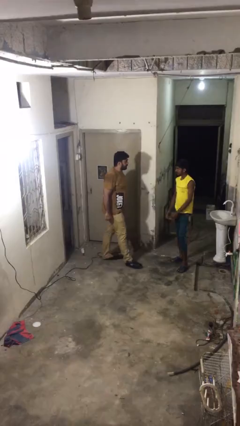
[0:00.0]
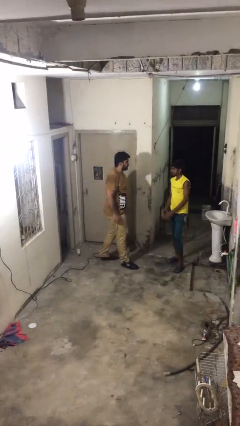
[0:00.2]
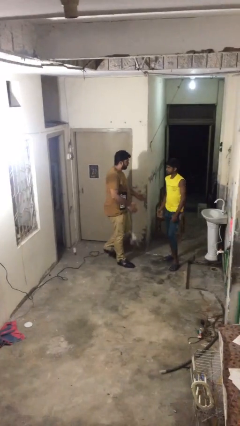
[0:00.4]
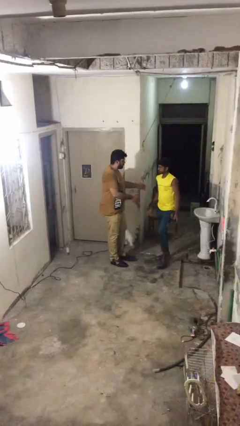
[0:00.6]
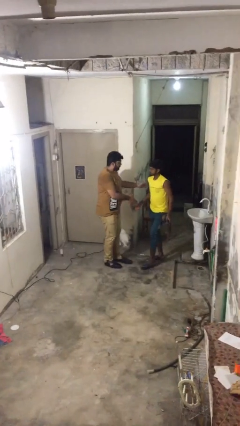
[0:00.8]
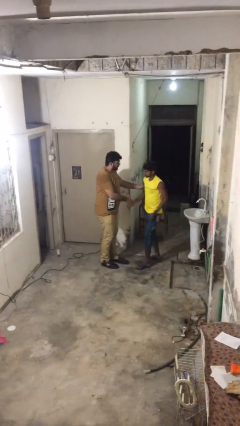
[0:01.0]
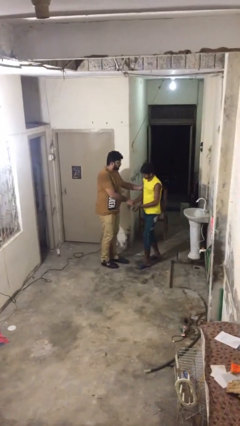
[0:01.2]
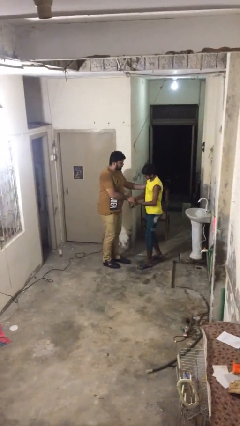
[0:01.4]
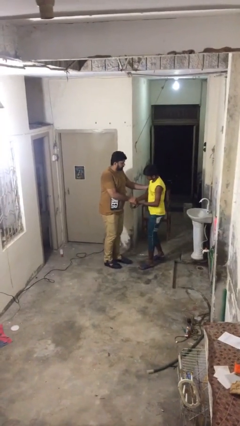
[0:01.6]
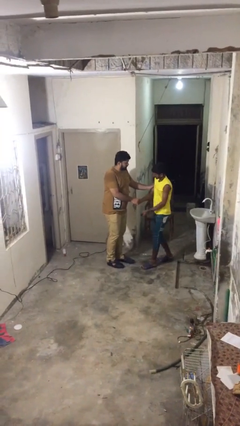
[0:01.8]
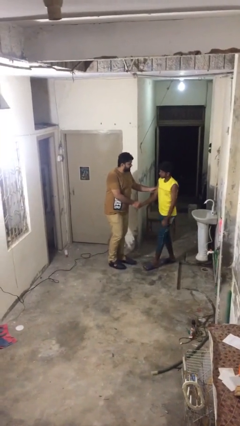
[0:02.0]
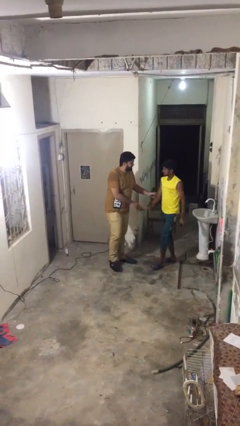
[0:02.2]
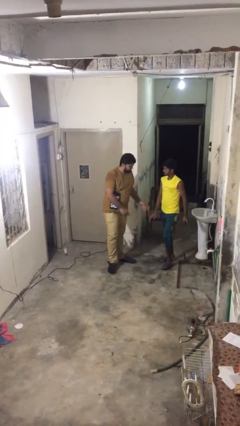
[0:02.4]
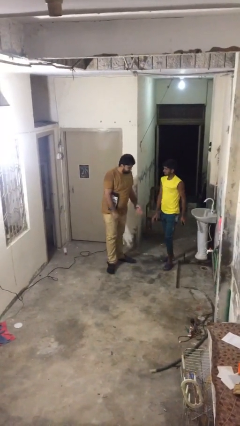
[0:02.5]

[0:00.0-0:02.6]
person shakes hand

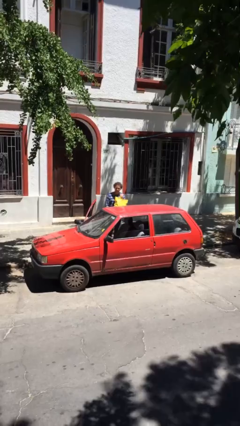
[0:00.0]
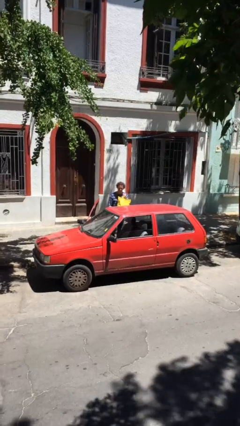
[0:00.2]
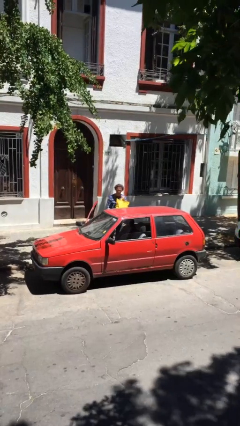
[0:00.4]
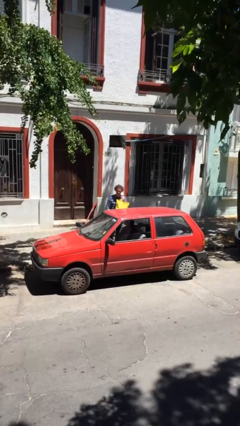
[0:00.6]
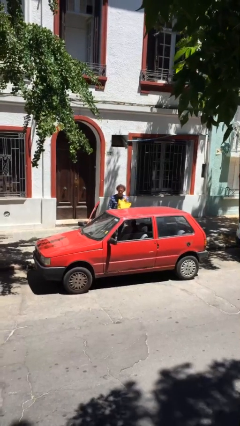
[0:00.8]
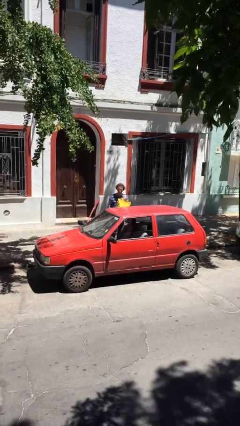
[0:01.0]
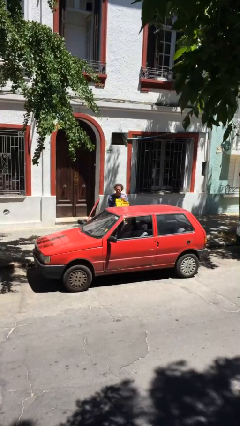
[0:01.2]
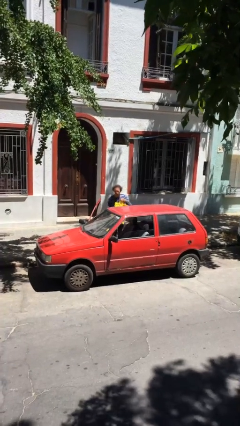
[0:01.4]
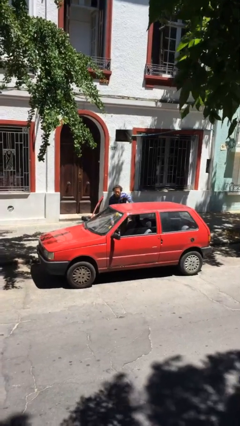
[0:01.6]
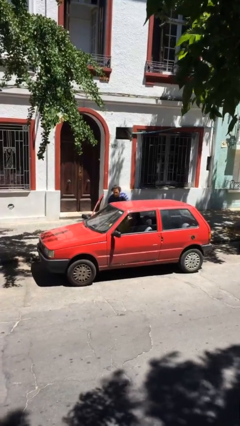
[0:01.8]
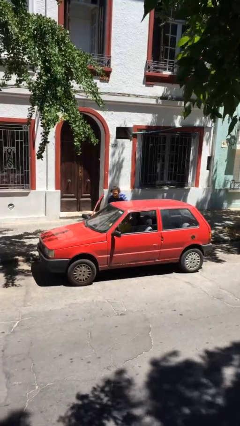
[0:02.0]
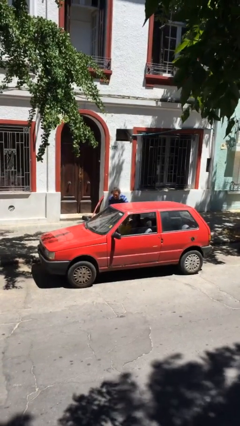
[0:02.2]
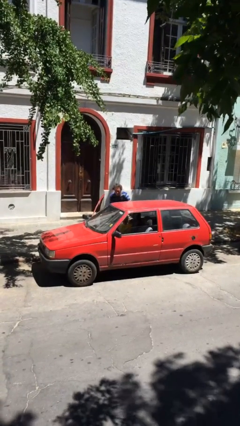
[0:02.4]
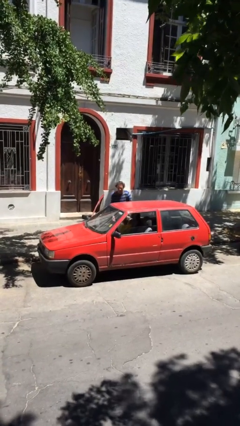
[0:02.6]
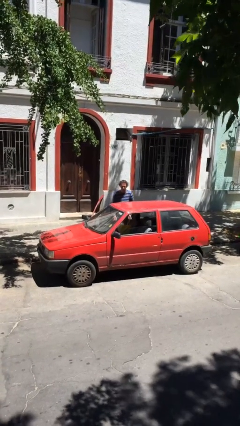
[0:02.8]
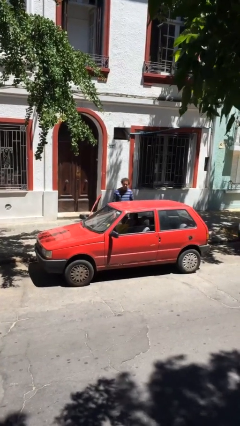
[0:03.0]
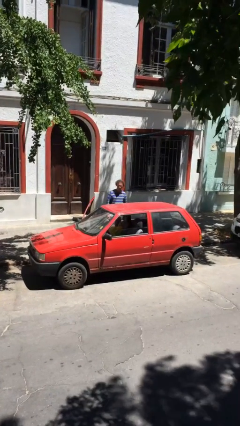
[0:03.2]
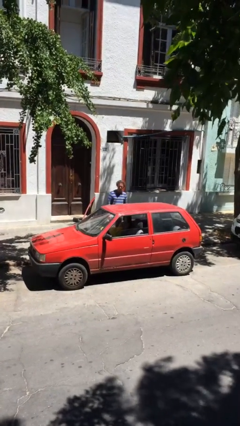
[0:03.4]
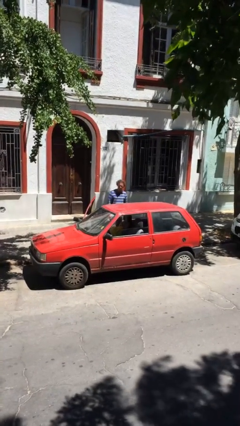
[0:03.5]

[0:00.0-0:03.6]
person loads car

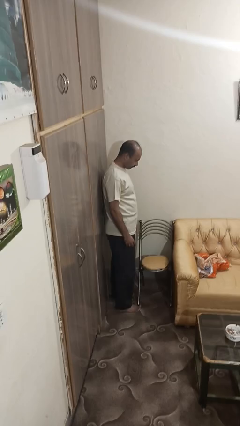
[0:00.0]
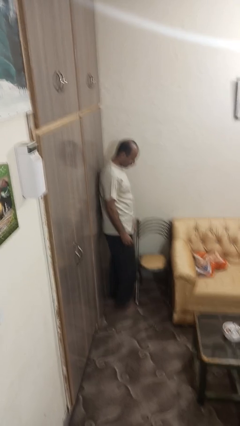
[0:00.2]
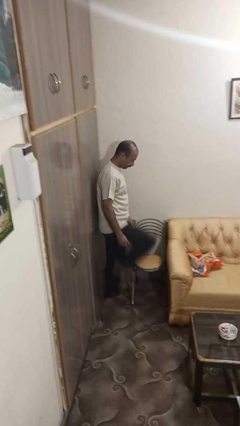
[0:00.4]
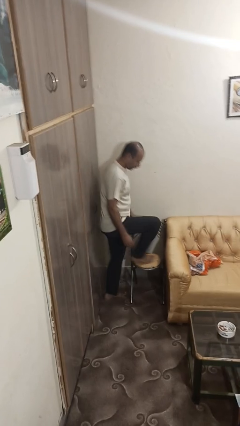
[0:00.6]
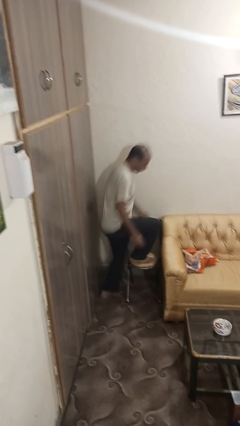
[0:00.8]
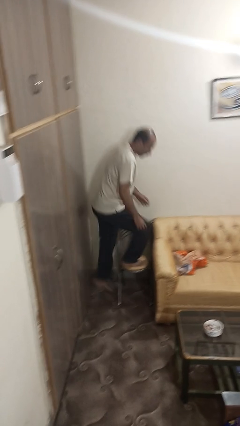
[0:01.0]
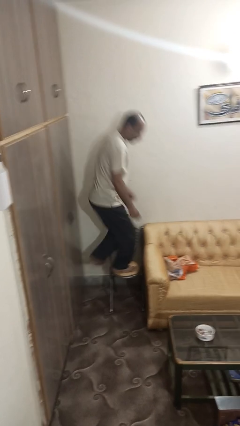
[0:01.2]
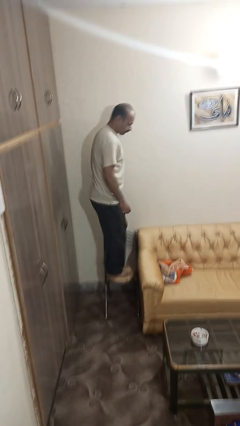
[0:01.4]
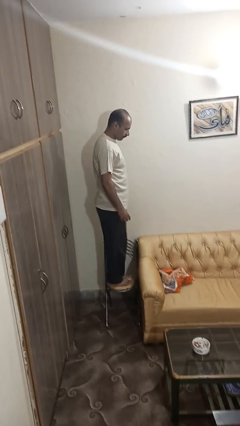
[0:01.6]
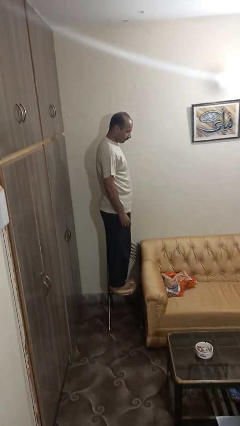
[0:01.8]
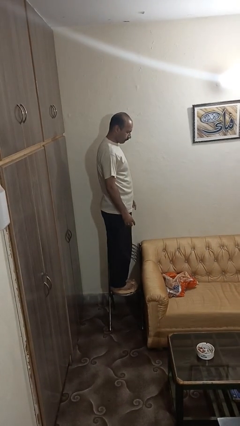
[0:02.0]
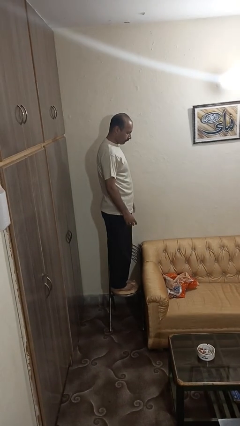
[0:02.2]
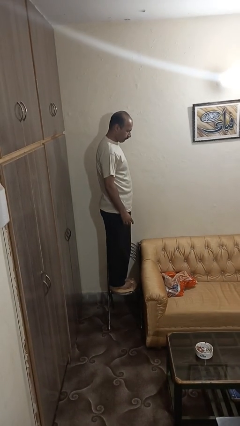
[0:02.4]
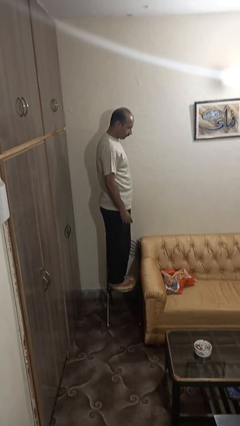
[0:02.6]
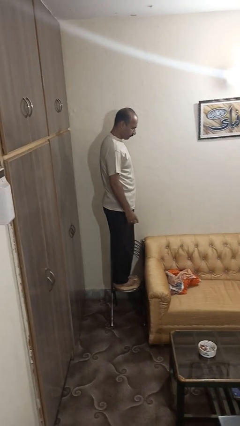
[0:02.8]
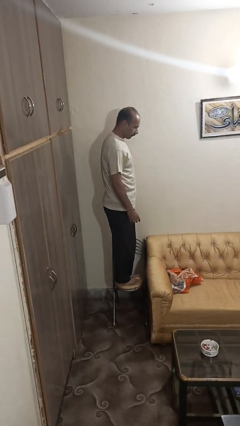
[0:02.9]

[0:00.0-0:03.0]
person climbs on chair

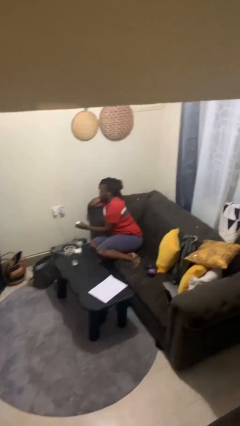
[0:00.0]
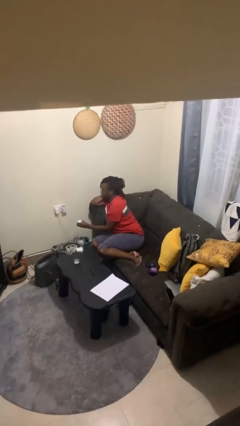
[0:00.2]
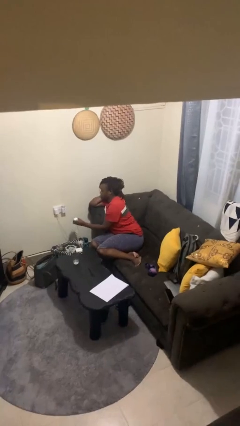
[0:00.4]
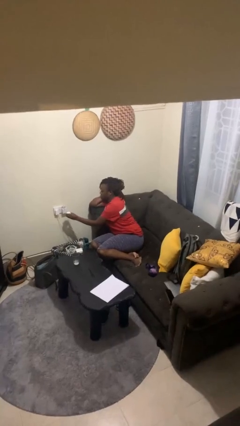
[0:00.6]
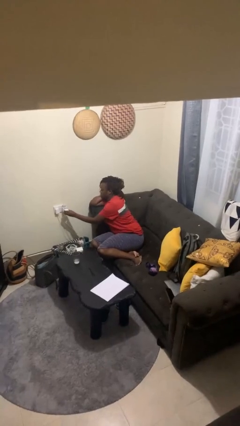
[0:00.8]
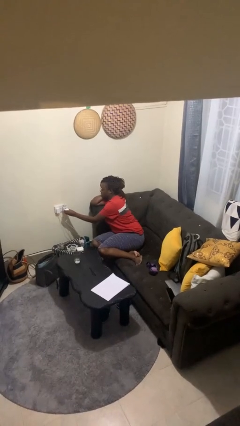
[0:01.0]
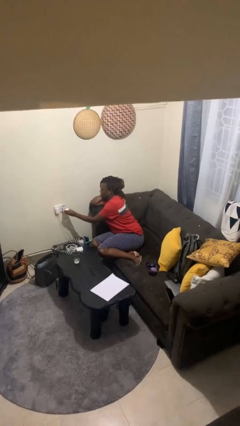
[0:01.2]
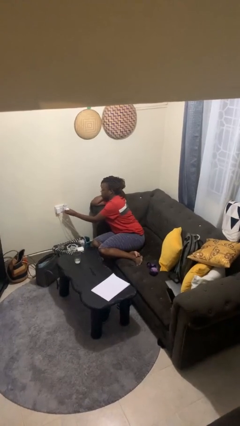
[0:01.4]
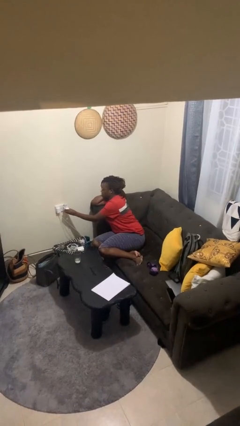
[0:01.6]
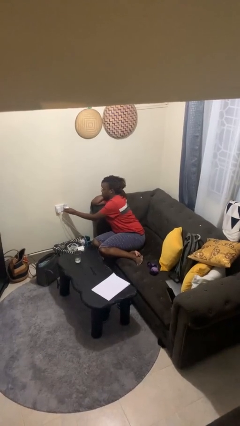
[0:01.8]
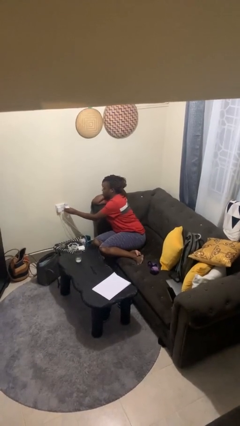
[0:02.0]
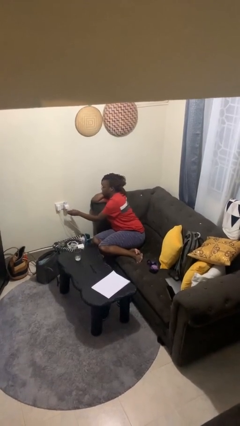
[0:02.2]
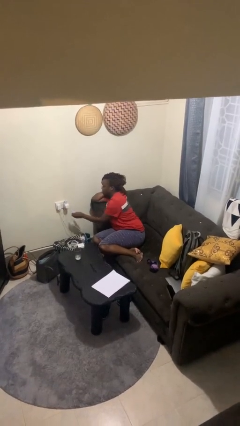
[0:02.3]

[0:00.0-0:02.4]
person plugs into electrical socket

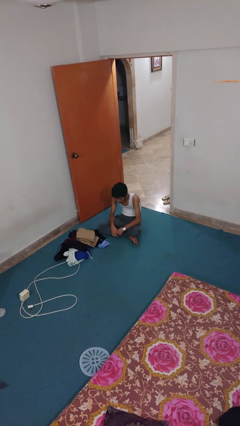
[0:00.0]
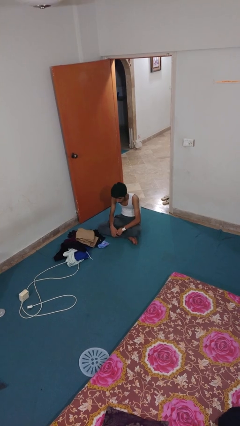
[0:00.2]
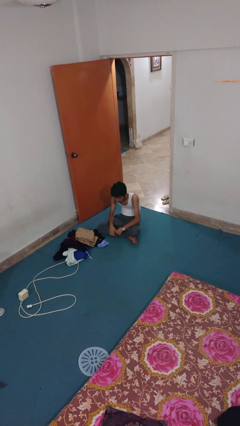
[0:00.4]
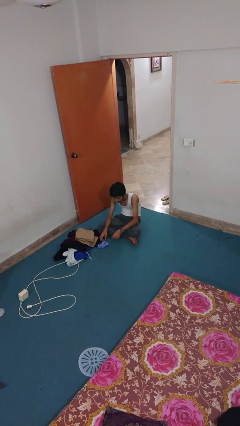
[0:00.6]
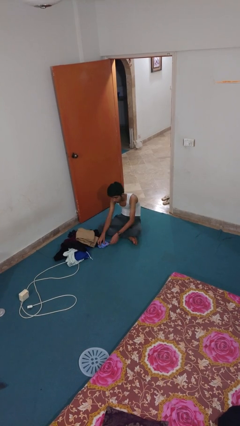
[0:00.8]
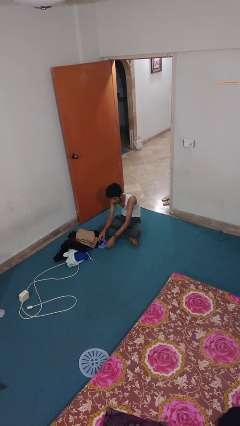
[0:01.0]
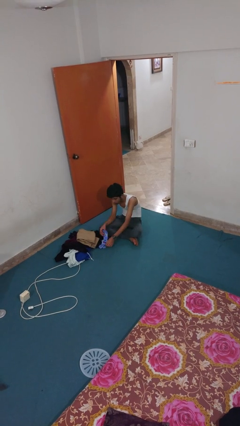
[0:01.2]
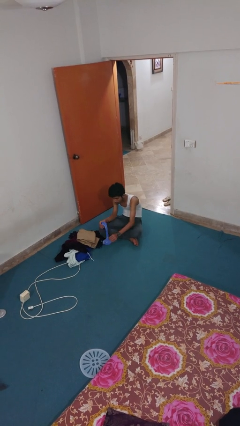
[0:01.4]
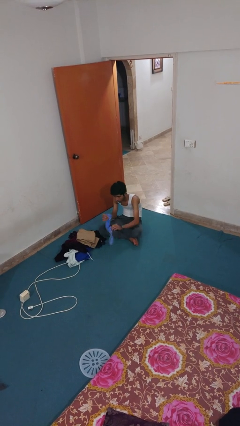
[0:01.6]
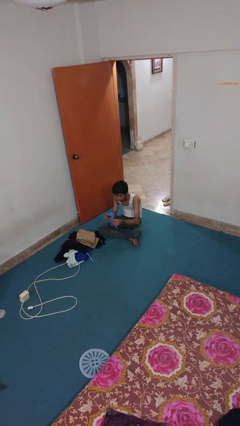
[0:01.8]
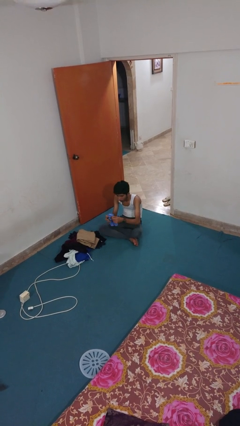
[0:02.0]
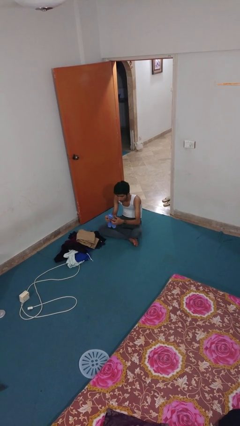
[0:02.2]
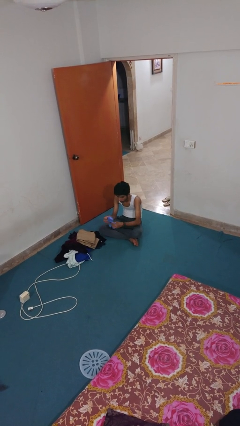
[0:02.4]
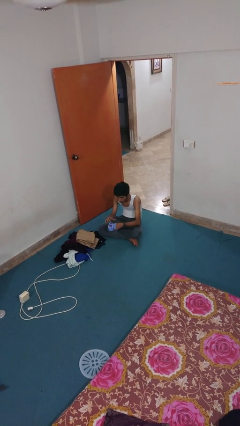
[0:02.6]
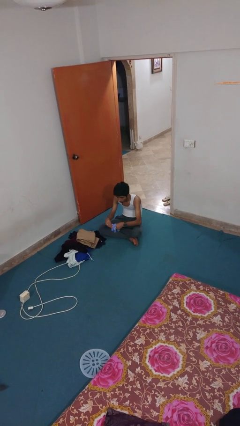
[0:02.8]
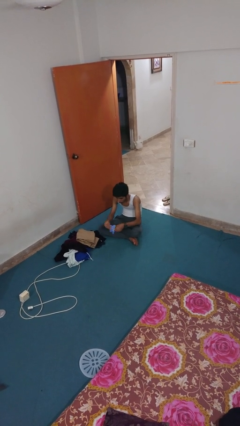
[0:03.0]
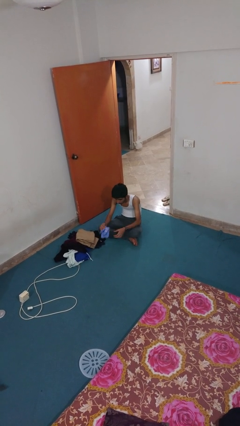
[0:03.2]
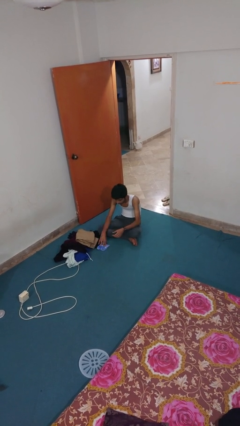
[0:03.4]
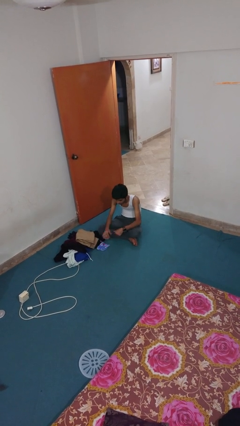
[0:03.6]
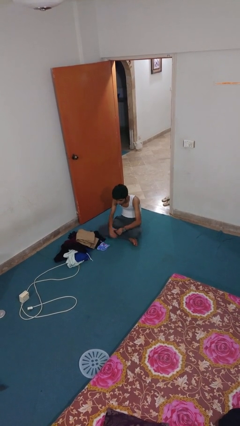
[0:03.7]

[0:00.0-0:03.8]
person folds socks

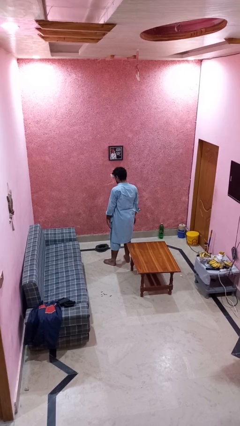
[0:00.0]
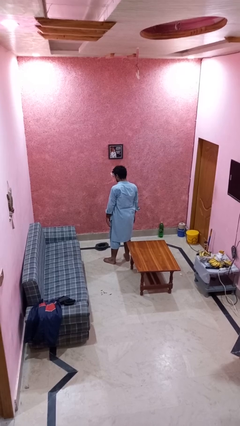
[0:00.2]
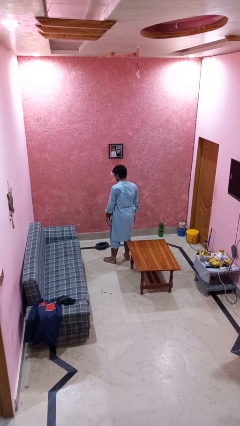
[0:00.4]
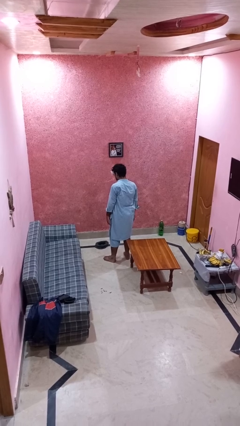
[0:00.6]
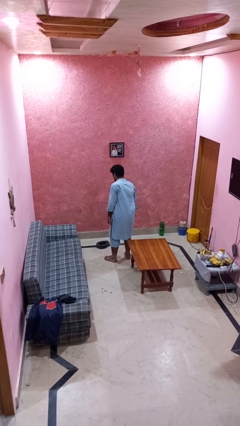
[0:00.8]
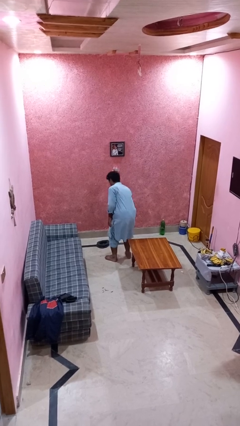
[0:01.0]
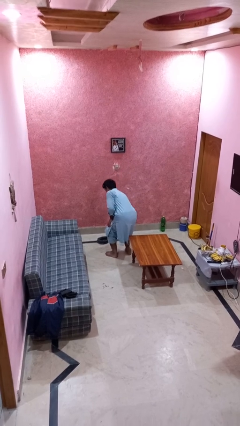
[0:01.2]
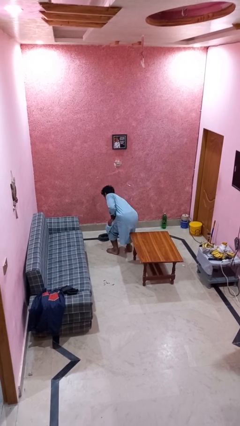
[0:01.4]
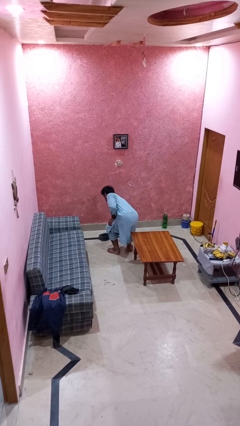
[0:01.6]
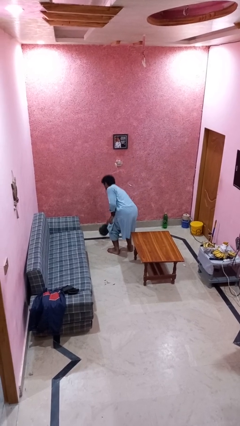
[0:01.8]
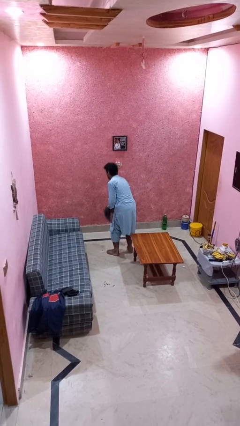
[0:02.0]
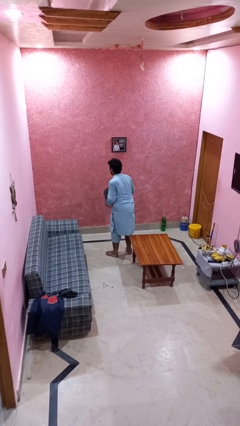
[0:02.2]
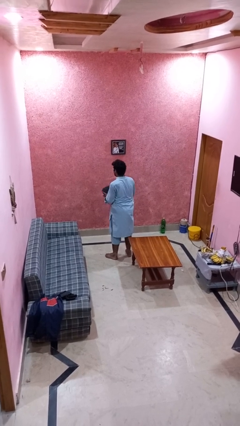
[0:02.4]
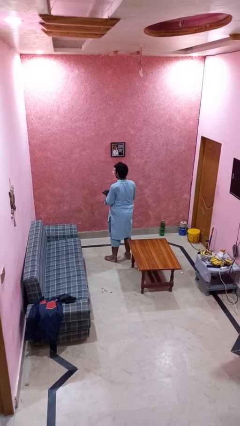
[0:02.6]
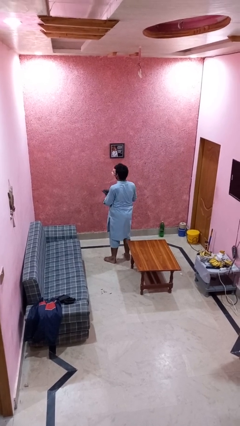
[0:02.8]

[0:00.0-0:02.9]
person picks up object from floor
